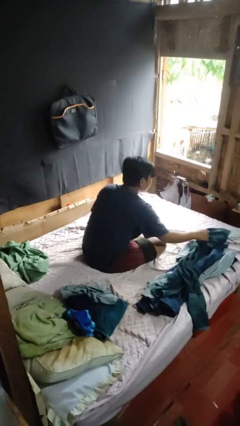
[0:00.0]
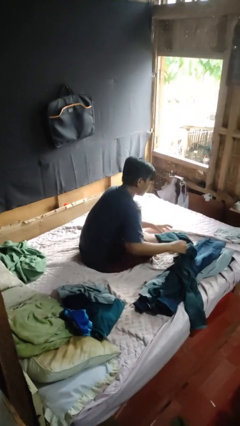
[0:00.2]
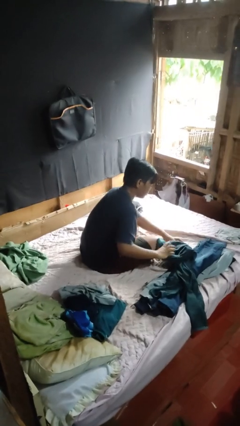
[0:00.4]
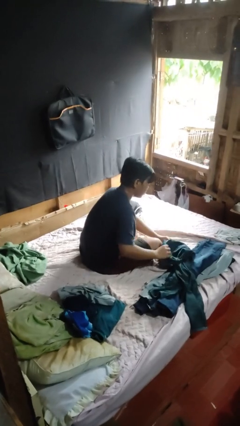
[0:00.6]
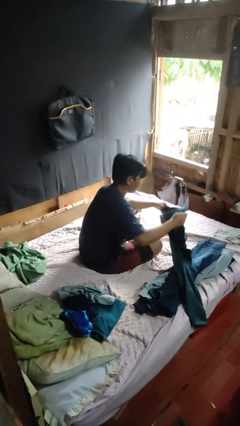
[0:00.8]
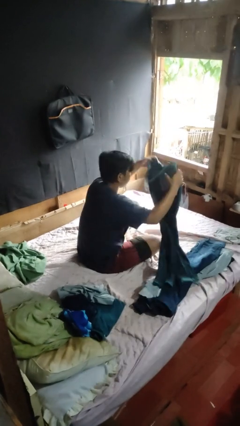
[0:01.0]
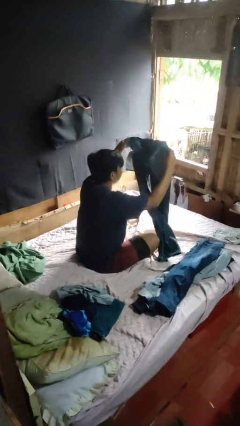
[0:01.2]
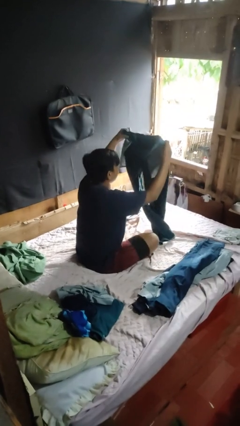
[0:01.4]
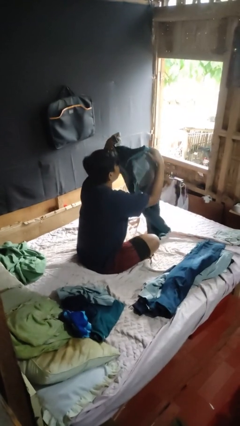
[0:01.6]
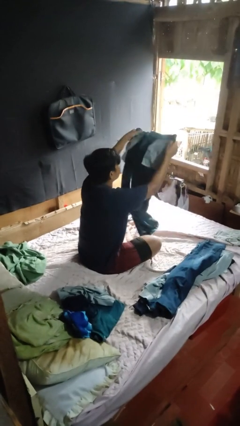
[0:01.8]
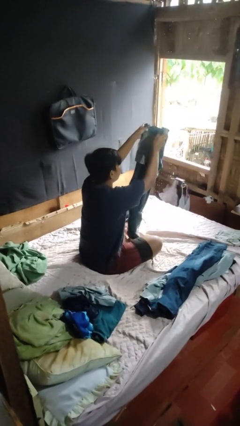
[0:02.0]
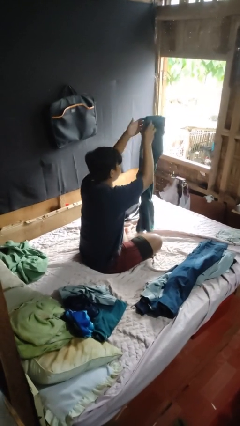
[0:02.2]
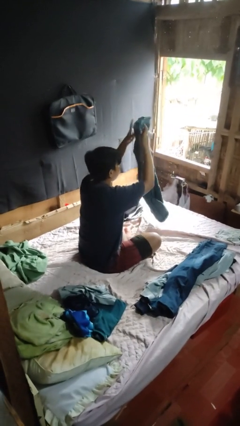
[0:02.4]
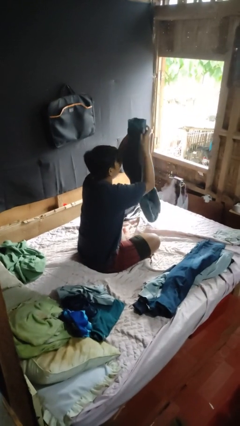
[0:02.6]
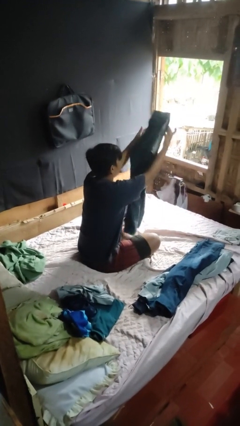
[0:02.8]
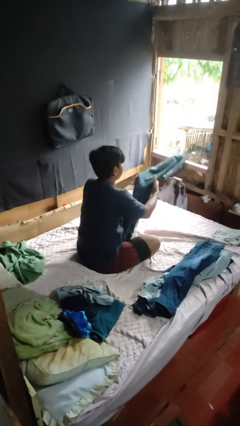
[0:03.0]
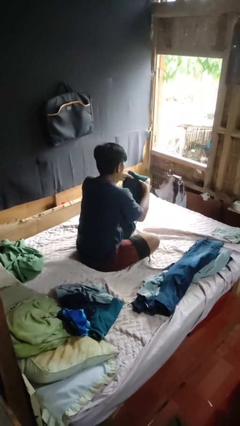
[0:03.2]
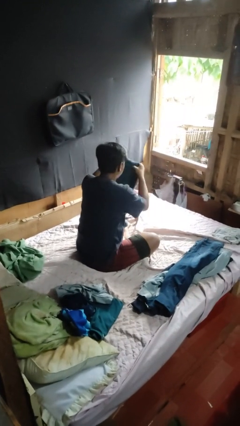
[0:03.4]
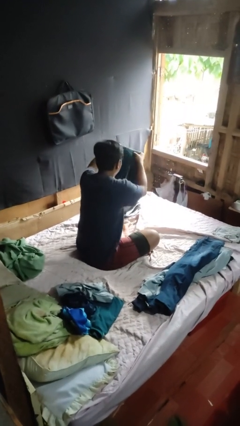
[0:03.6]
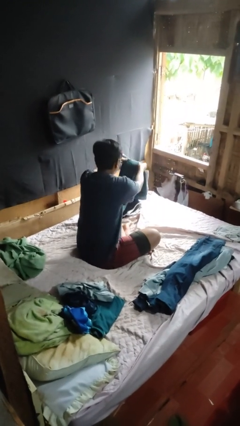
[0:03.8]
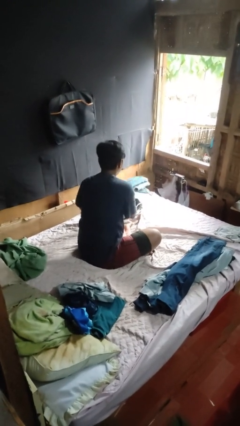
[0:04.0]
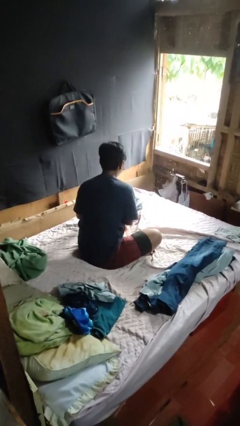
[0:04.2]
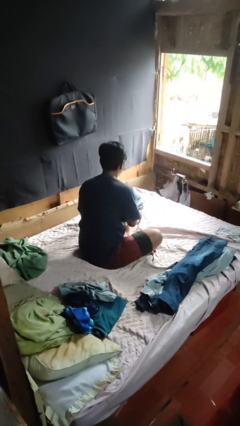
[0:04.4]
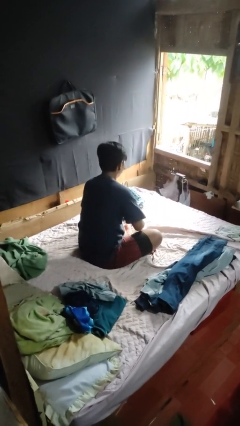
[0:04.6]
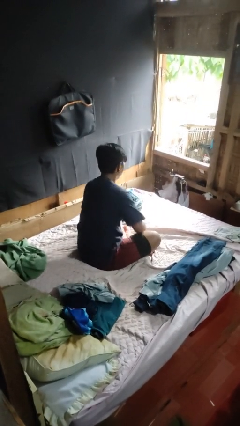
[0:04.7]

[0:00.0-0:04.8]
person folds pants

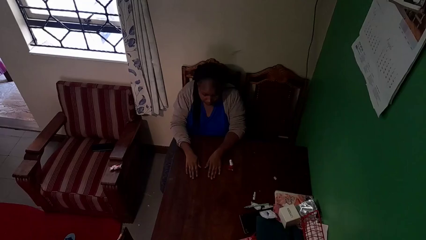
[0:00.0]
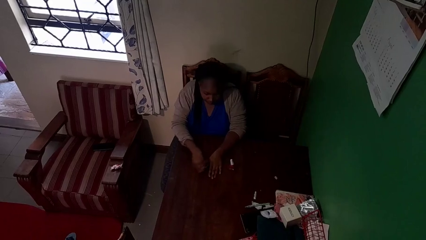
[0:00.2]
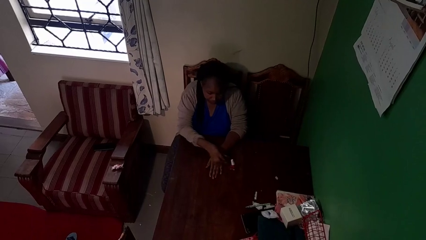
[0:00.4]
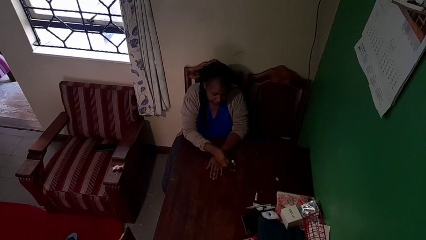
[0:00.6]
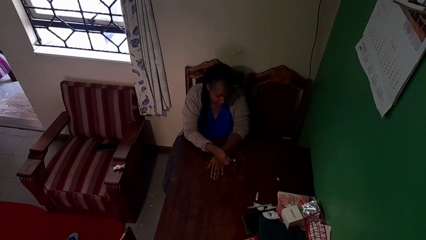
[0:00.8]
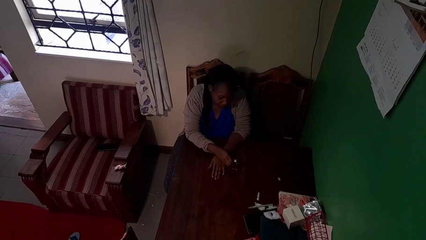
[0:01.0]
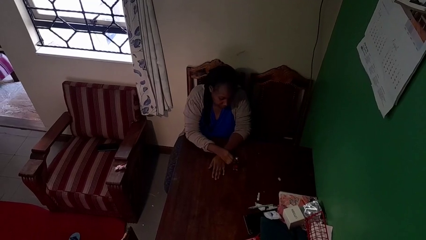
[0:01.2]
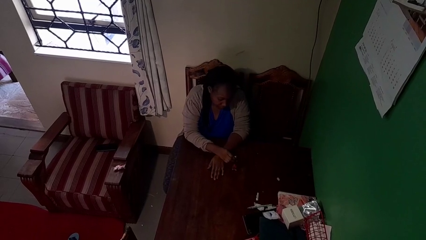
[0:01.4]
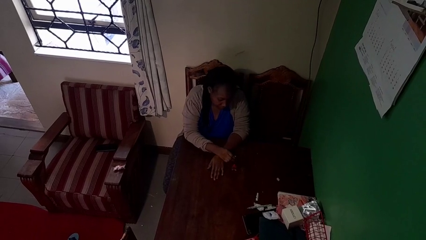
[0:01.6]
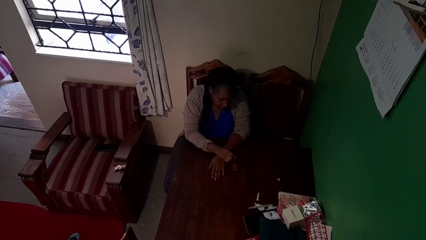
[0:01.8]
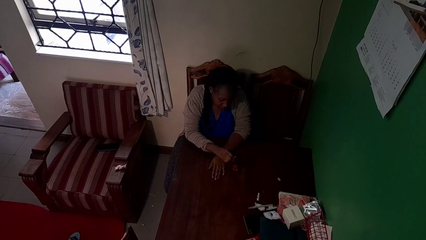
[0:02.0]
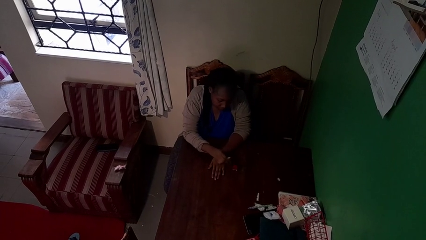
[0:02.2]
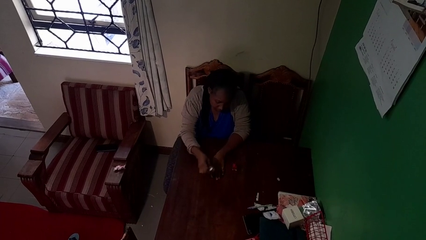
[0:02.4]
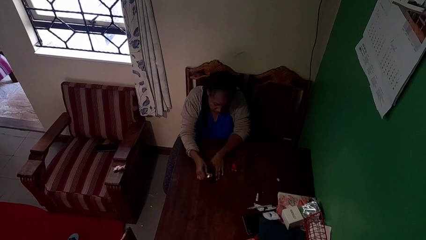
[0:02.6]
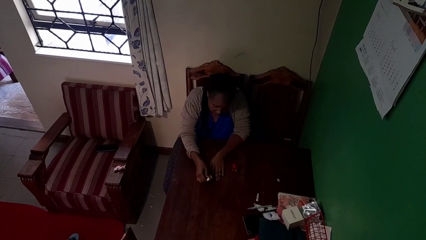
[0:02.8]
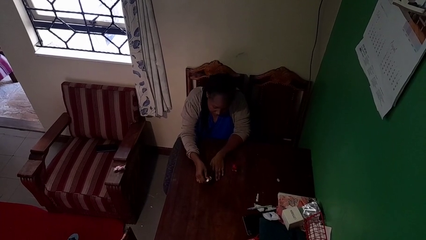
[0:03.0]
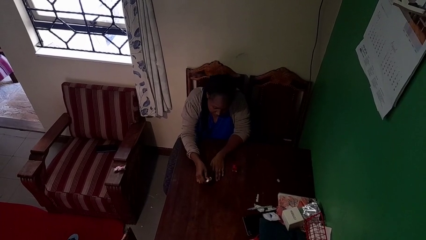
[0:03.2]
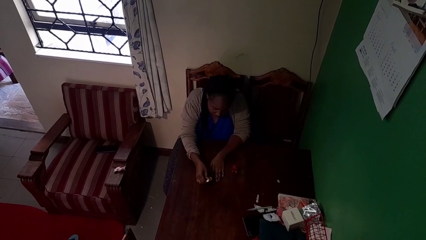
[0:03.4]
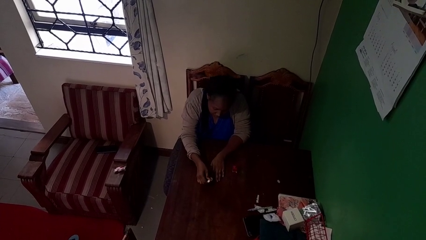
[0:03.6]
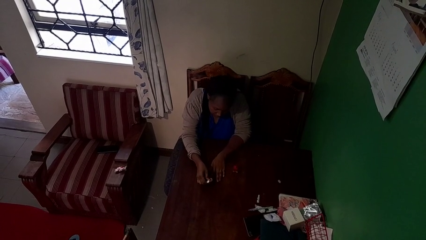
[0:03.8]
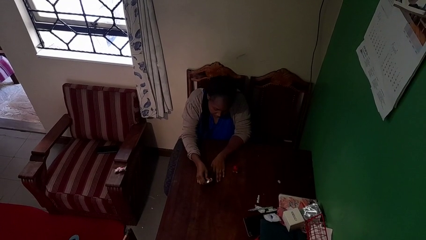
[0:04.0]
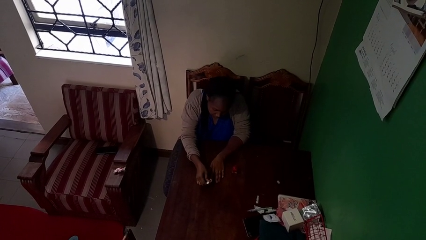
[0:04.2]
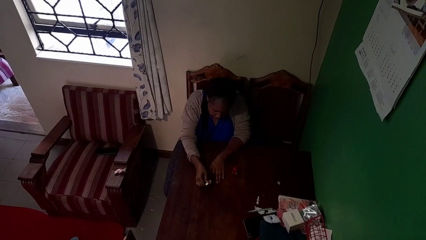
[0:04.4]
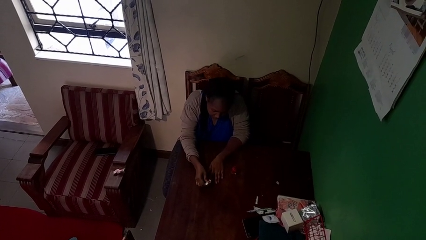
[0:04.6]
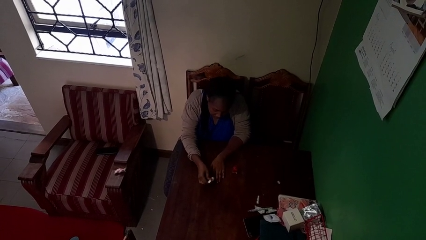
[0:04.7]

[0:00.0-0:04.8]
person paints fingernails

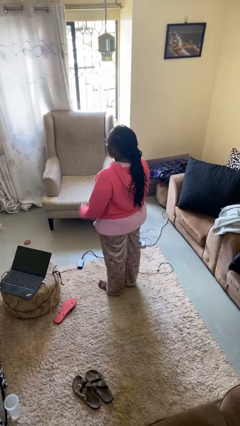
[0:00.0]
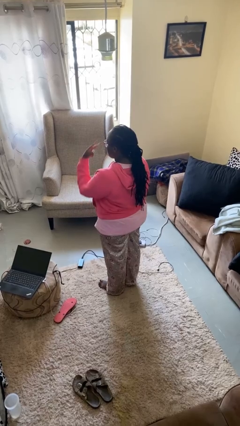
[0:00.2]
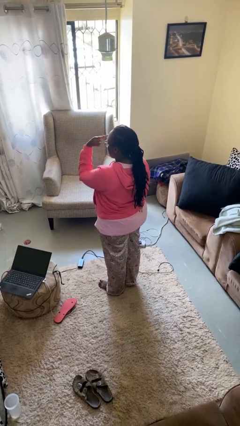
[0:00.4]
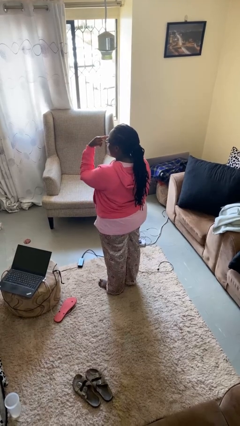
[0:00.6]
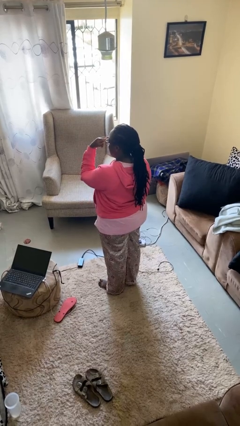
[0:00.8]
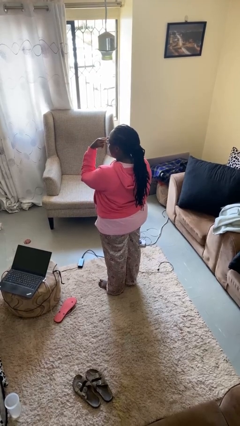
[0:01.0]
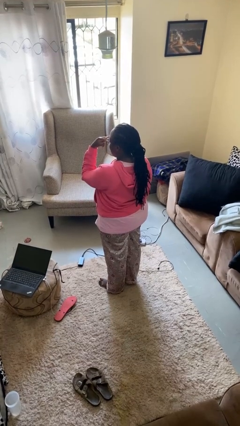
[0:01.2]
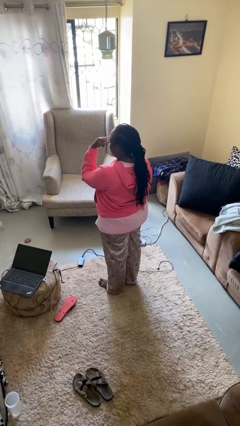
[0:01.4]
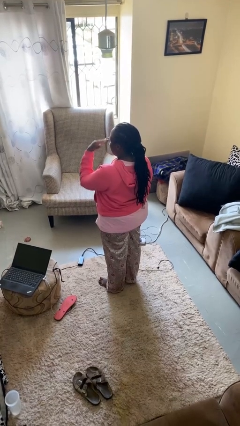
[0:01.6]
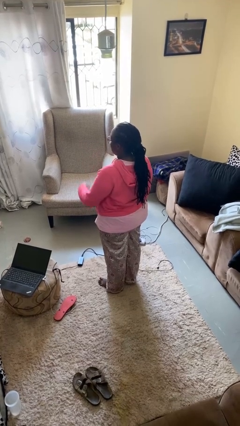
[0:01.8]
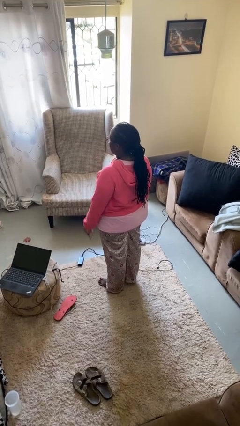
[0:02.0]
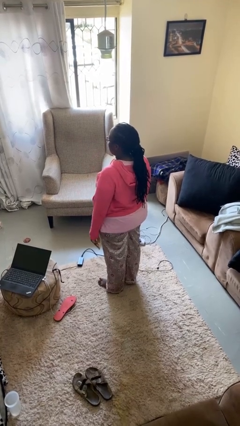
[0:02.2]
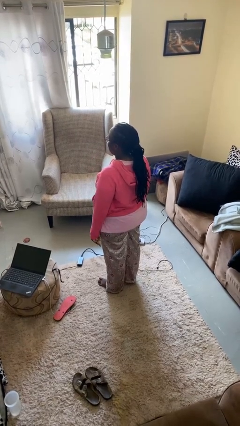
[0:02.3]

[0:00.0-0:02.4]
person gestures watch closely

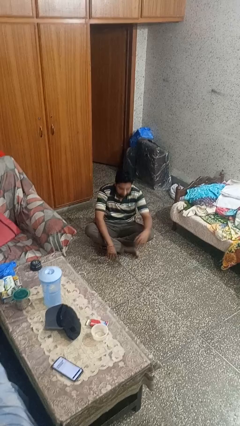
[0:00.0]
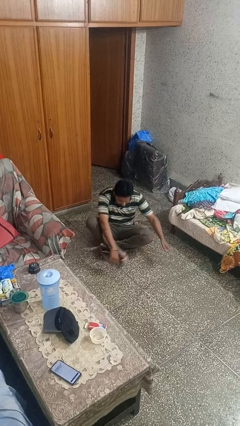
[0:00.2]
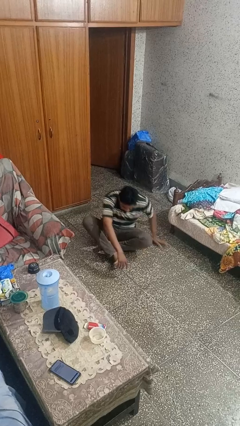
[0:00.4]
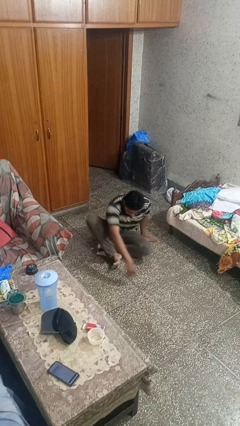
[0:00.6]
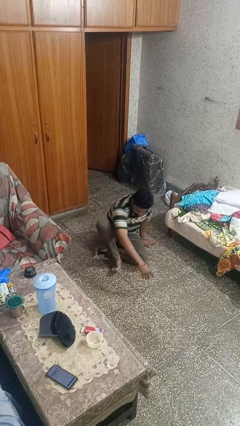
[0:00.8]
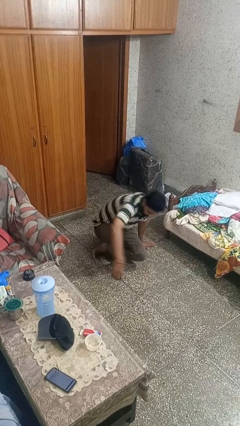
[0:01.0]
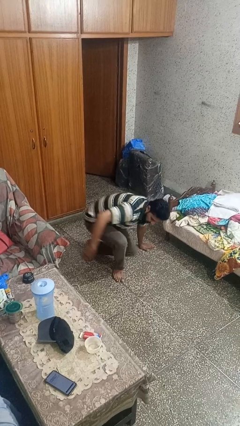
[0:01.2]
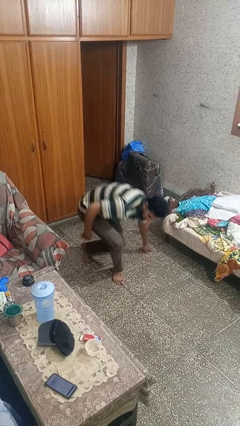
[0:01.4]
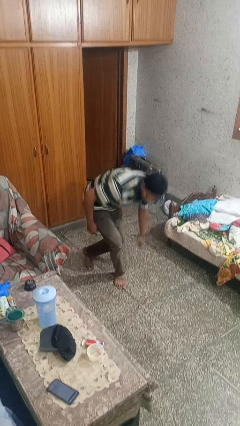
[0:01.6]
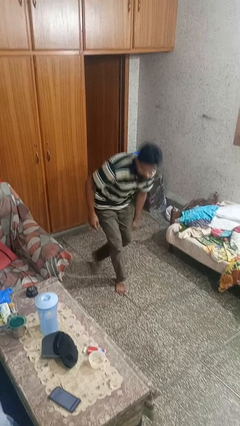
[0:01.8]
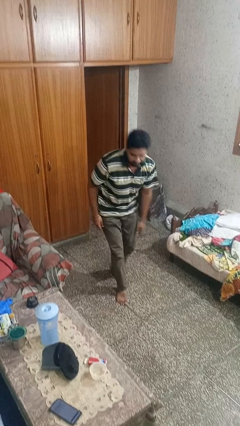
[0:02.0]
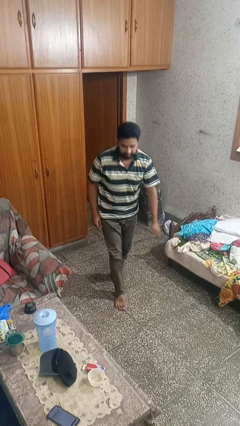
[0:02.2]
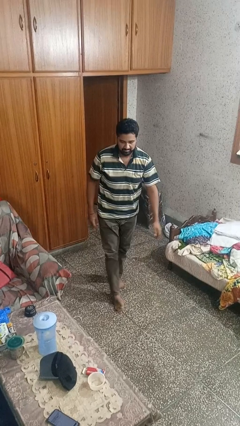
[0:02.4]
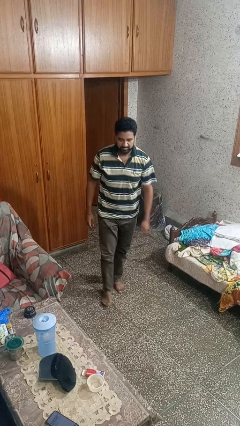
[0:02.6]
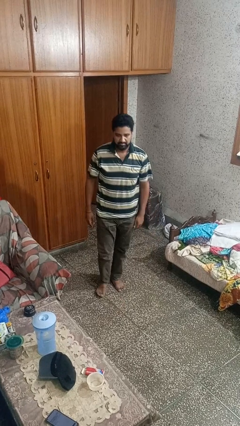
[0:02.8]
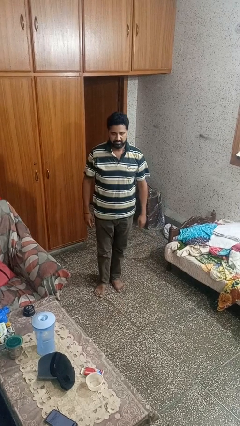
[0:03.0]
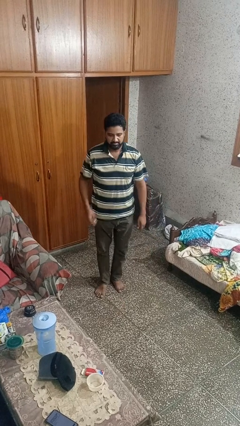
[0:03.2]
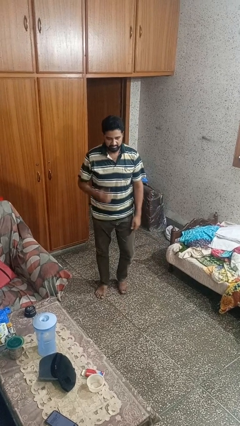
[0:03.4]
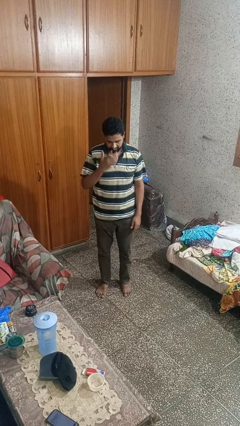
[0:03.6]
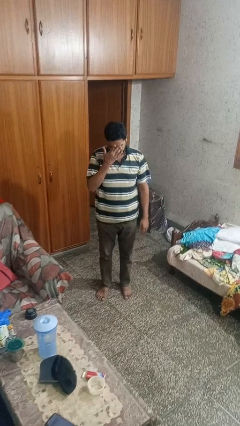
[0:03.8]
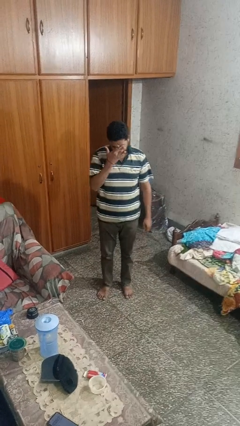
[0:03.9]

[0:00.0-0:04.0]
person stands up from floor

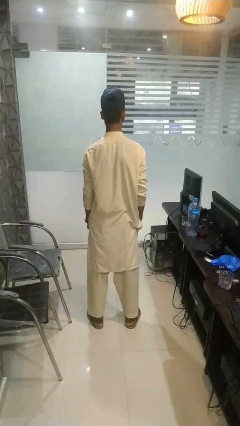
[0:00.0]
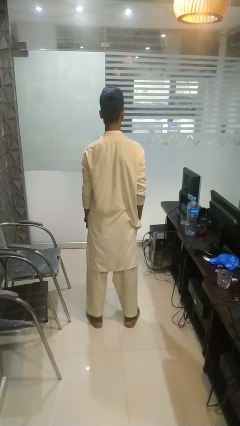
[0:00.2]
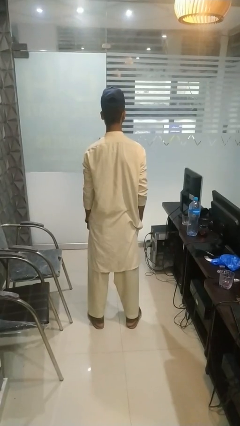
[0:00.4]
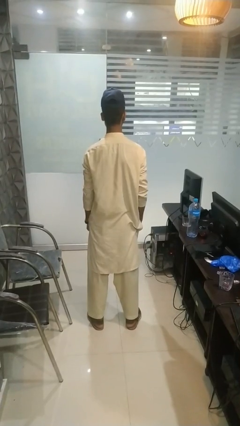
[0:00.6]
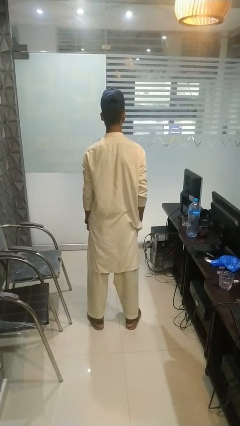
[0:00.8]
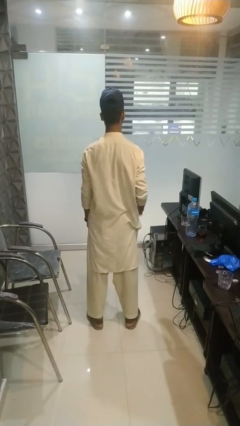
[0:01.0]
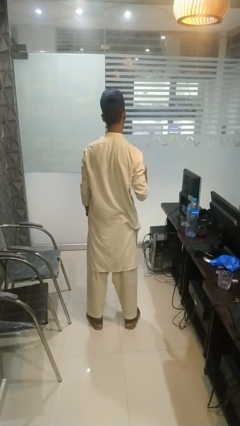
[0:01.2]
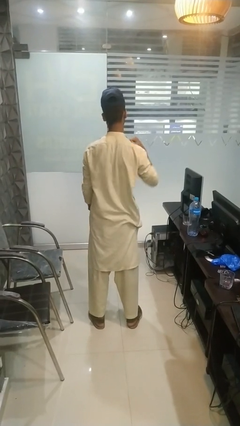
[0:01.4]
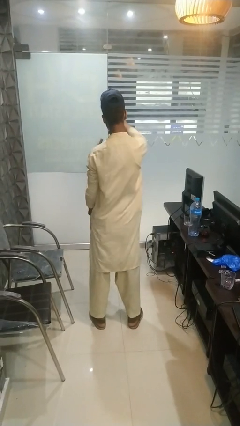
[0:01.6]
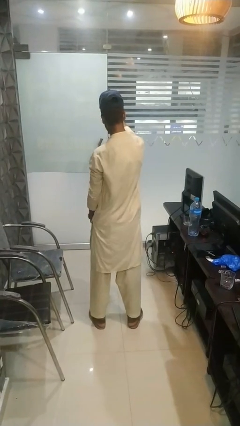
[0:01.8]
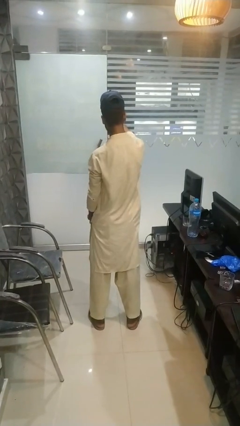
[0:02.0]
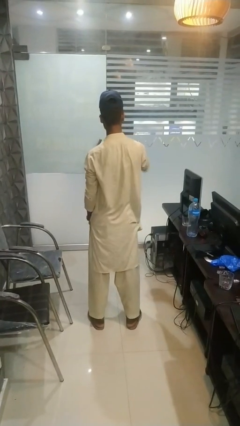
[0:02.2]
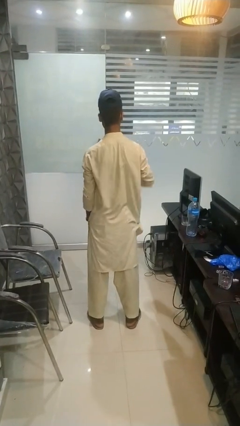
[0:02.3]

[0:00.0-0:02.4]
person punches
